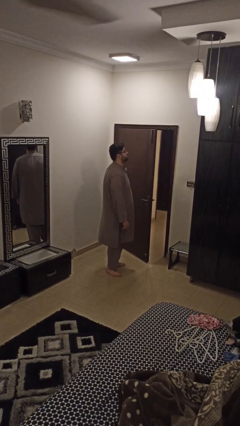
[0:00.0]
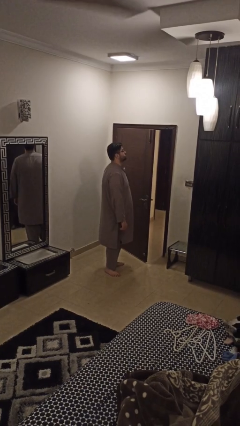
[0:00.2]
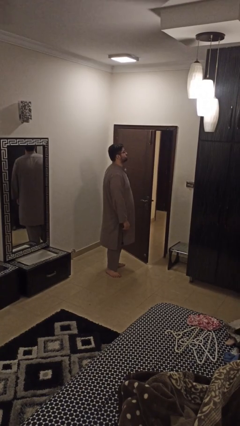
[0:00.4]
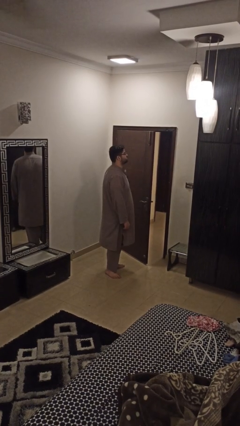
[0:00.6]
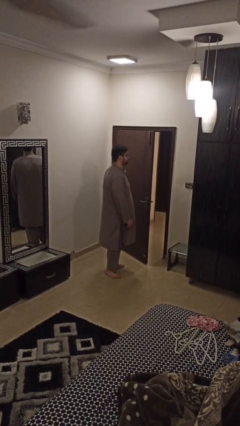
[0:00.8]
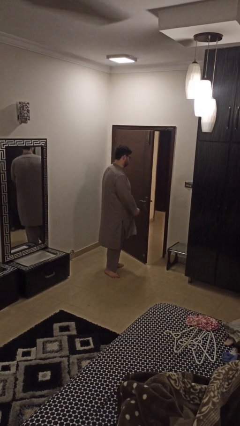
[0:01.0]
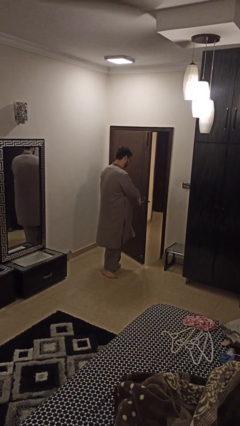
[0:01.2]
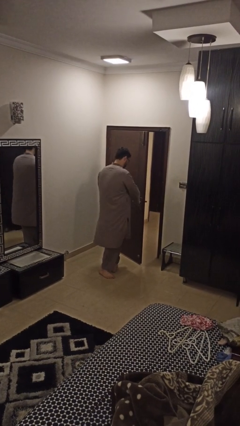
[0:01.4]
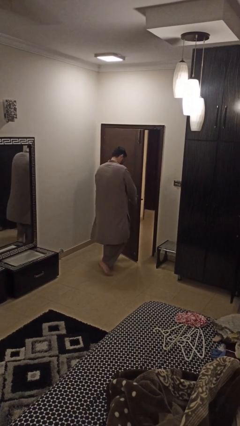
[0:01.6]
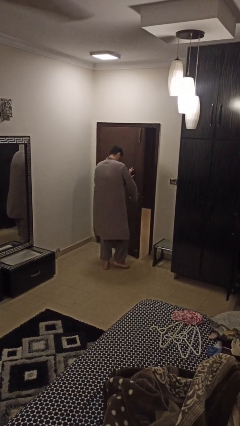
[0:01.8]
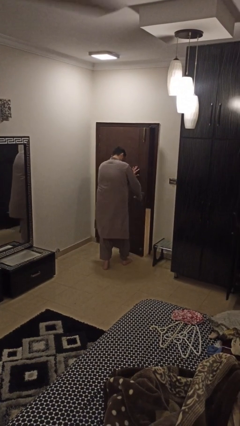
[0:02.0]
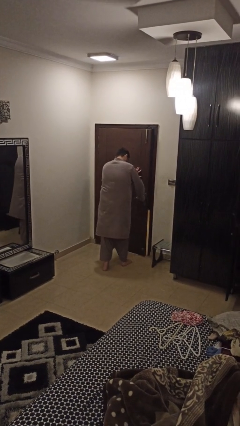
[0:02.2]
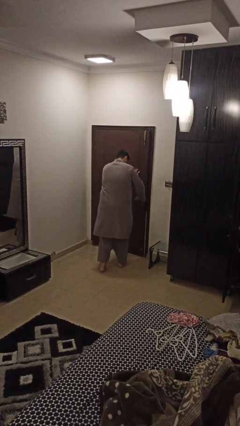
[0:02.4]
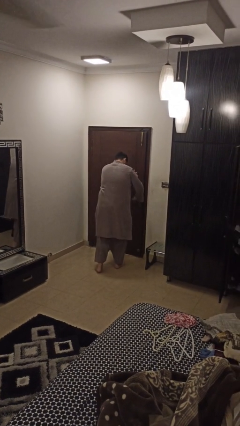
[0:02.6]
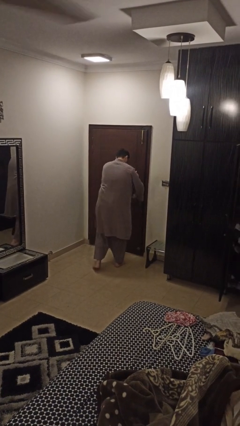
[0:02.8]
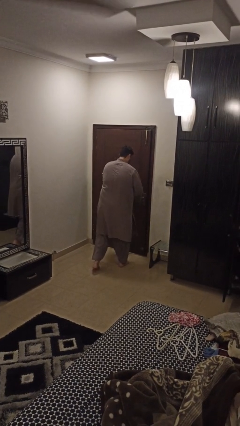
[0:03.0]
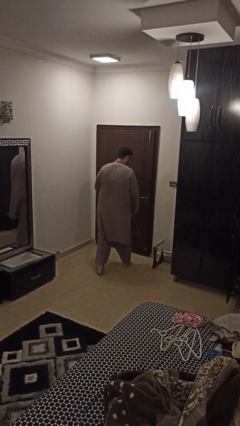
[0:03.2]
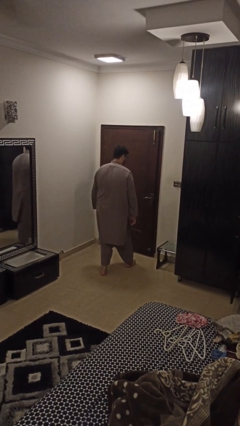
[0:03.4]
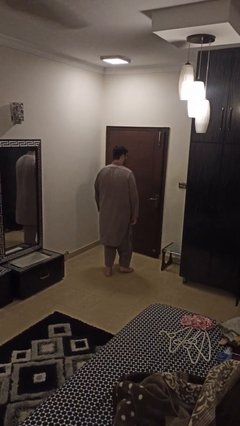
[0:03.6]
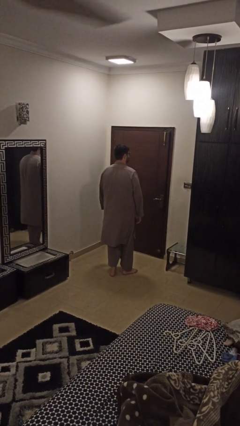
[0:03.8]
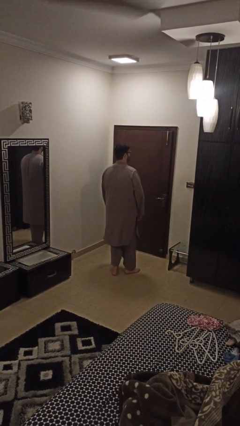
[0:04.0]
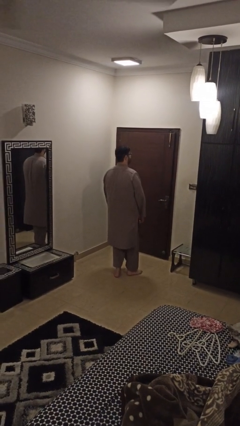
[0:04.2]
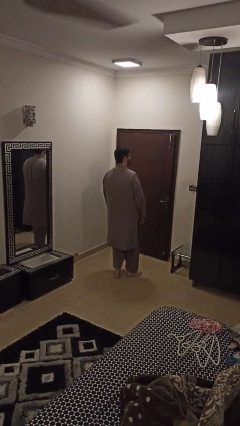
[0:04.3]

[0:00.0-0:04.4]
person closes facility door

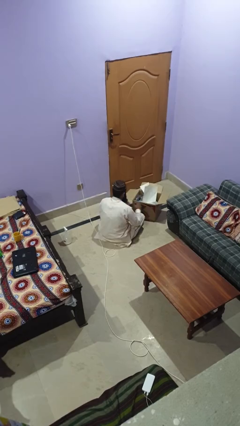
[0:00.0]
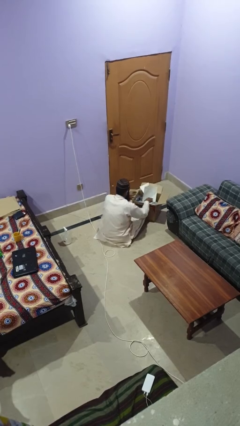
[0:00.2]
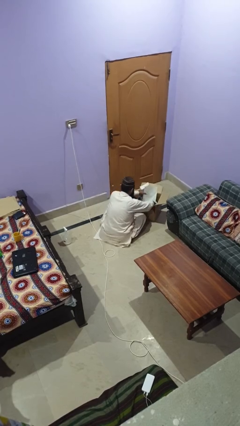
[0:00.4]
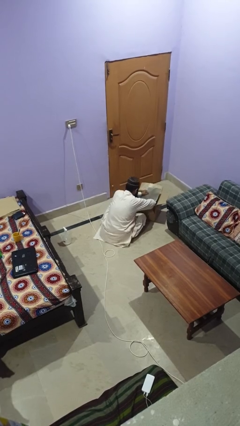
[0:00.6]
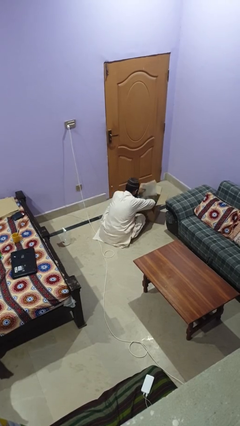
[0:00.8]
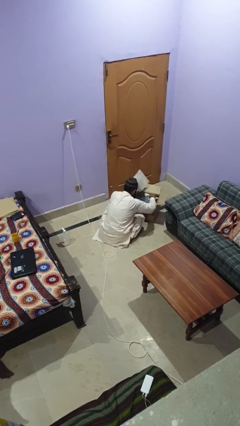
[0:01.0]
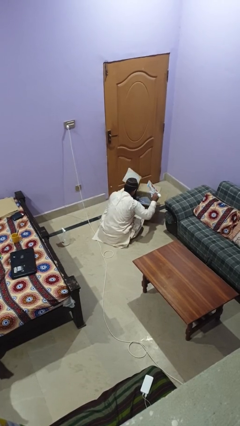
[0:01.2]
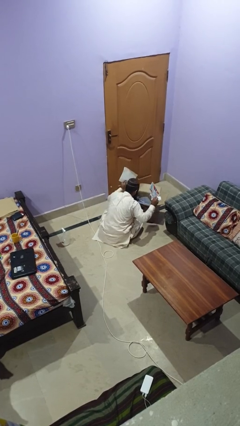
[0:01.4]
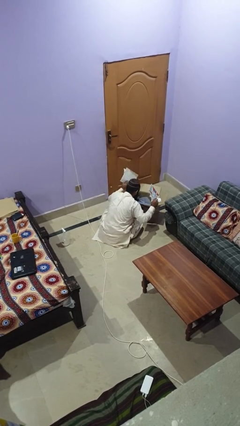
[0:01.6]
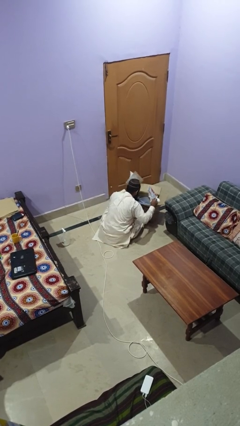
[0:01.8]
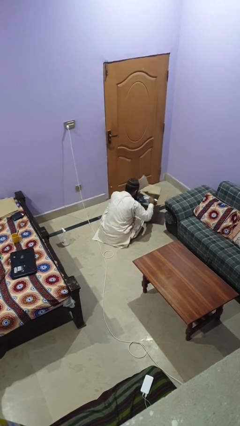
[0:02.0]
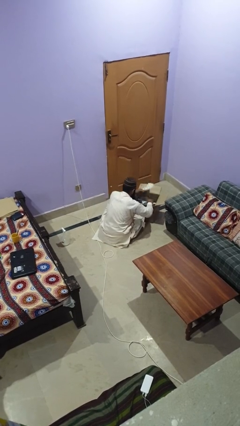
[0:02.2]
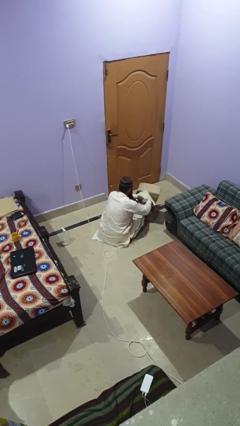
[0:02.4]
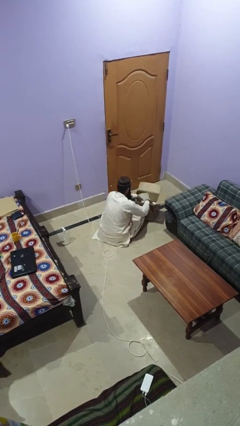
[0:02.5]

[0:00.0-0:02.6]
person searches in box

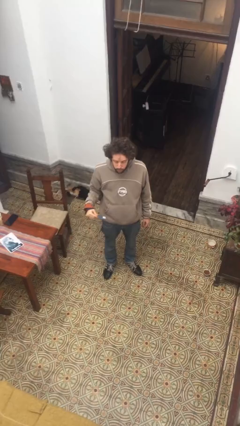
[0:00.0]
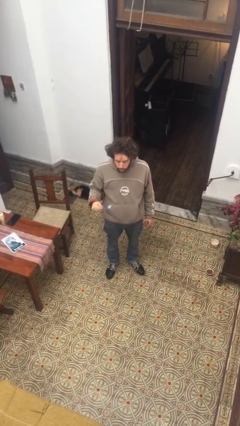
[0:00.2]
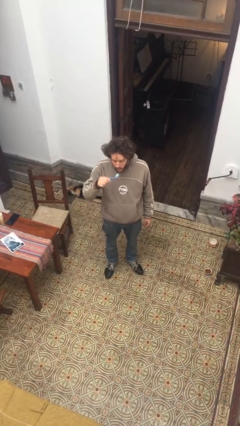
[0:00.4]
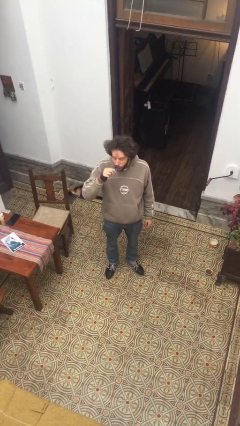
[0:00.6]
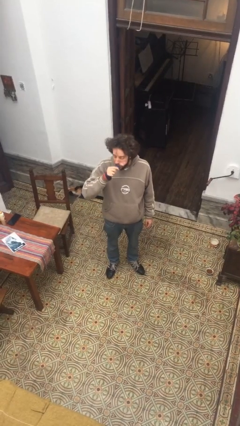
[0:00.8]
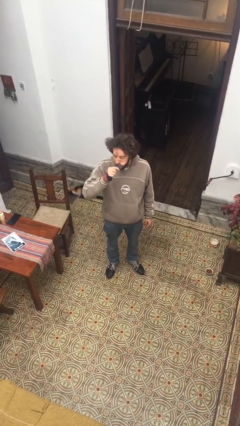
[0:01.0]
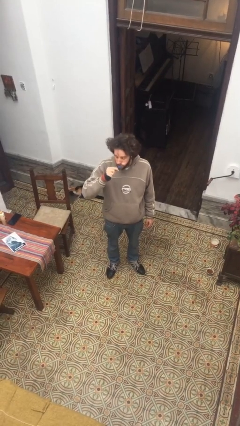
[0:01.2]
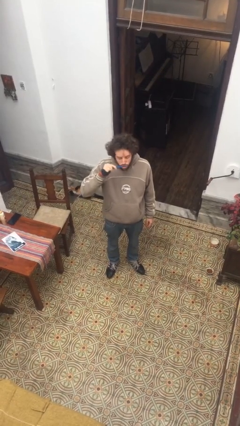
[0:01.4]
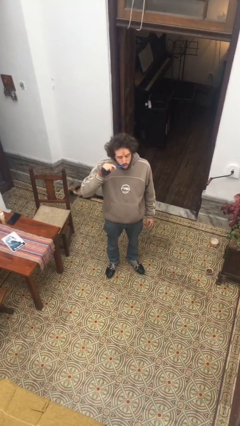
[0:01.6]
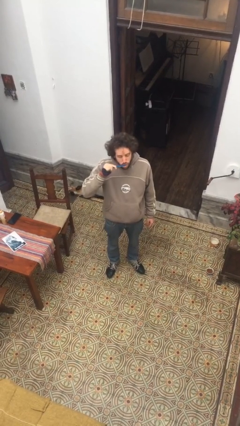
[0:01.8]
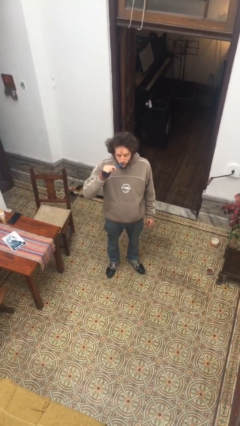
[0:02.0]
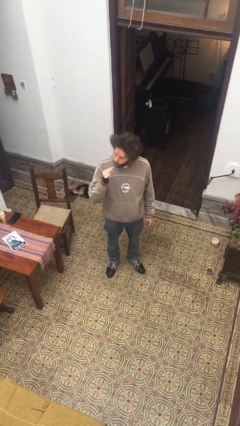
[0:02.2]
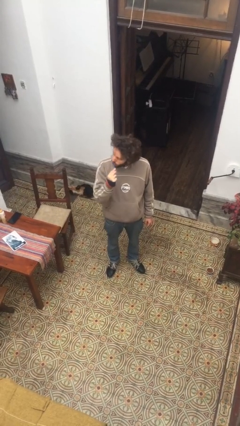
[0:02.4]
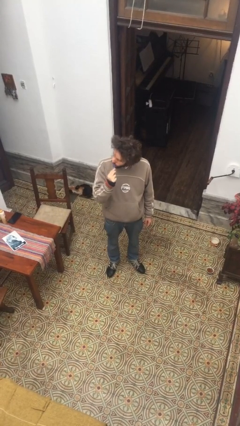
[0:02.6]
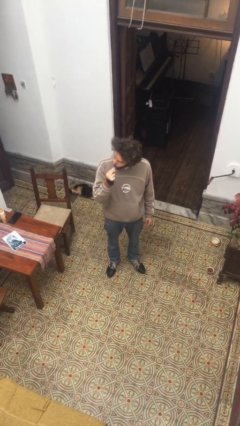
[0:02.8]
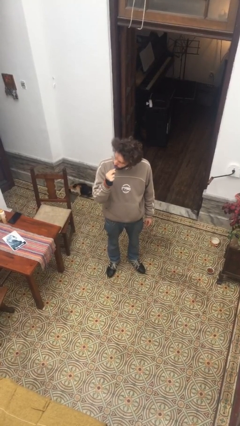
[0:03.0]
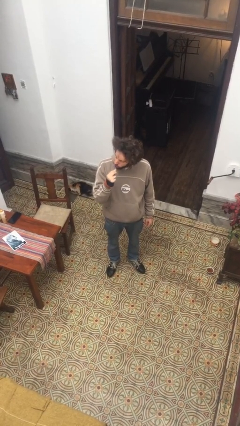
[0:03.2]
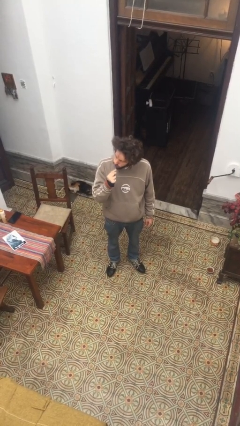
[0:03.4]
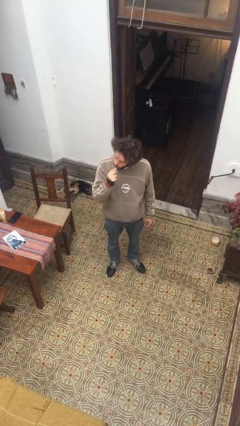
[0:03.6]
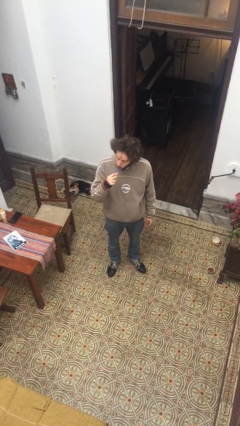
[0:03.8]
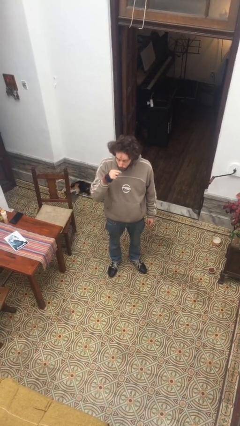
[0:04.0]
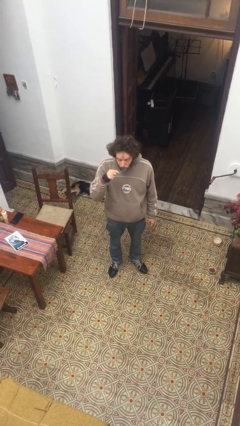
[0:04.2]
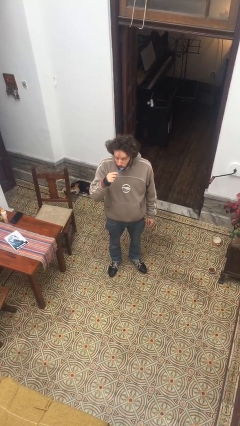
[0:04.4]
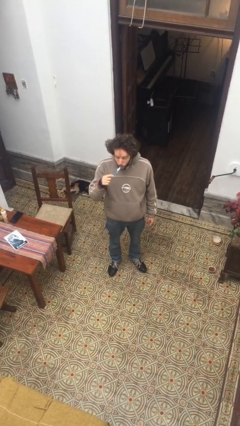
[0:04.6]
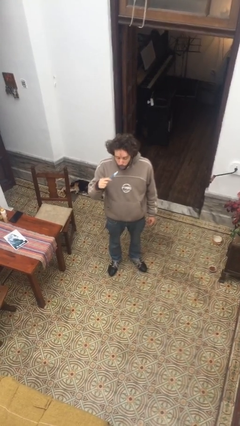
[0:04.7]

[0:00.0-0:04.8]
person brushes teeth

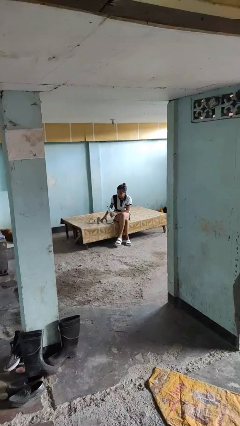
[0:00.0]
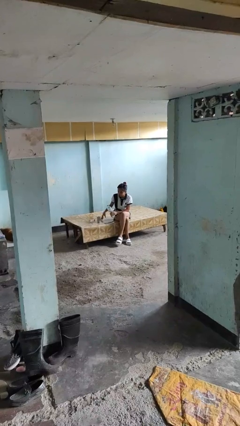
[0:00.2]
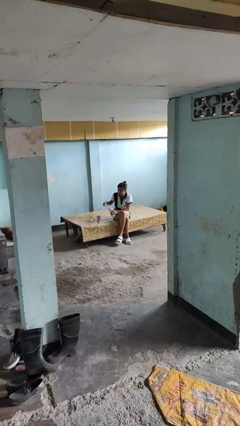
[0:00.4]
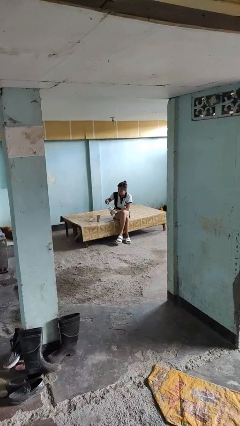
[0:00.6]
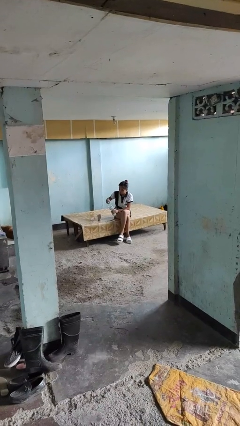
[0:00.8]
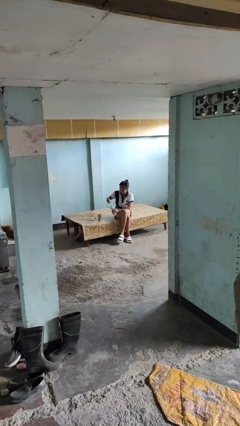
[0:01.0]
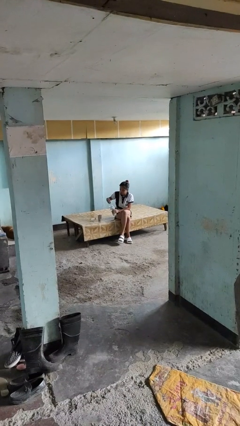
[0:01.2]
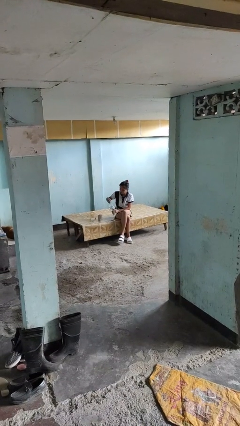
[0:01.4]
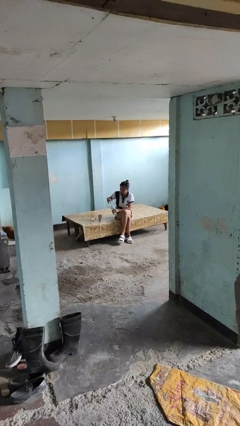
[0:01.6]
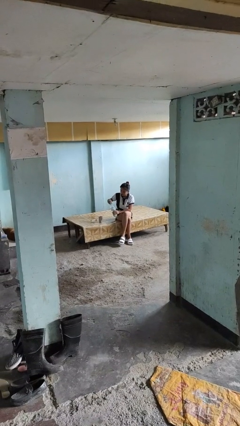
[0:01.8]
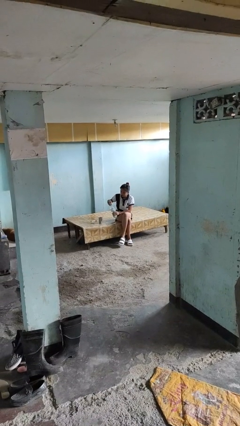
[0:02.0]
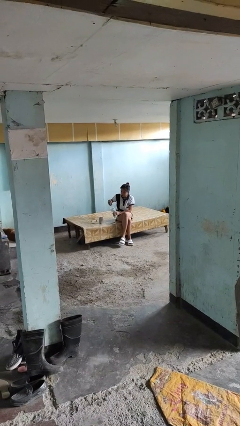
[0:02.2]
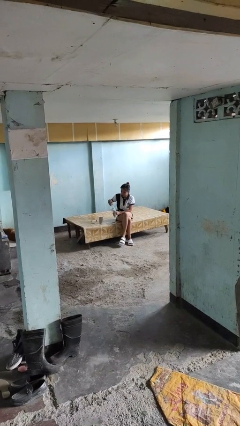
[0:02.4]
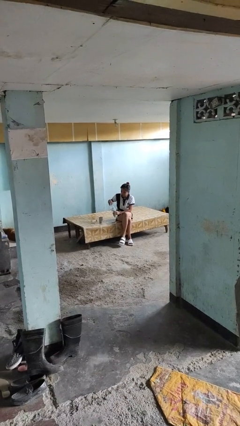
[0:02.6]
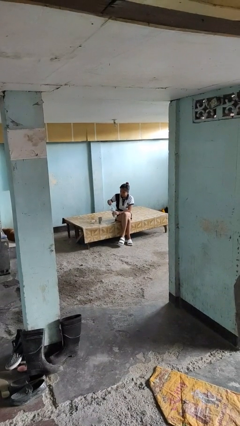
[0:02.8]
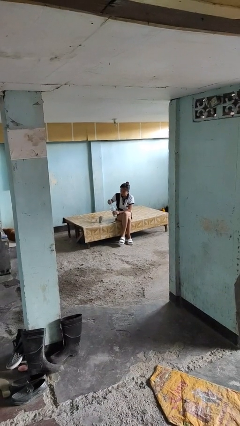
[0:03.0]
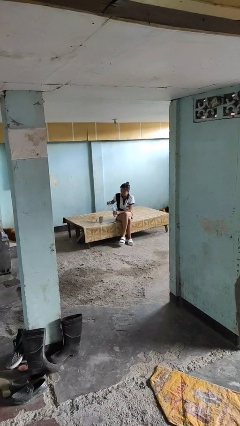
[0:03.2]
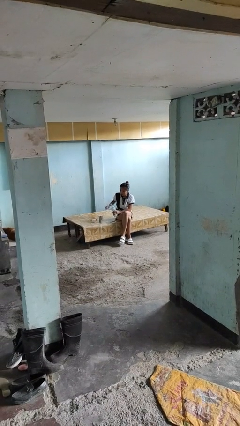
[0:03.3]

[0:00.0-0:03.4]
person unscrews lid from bottle

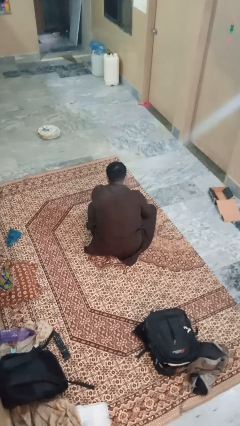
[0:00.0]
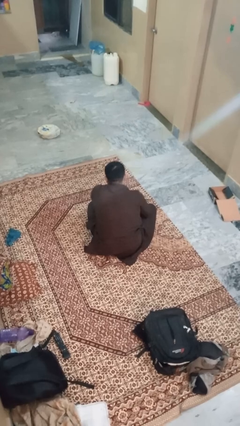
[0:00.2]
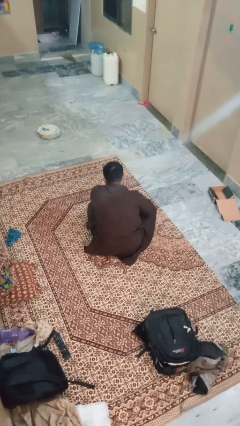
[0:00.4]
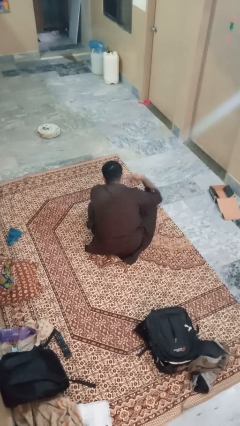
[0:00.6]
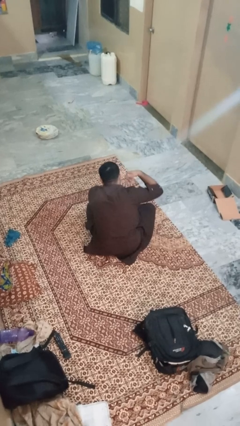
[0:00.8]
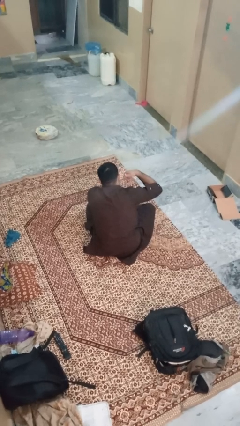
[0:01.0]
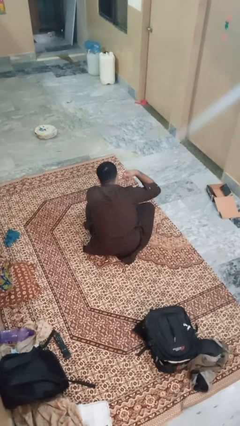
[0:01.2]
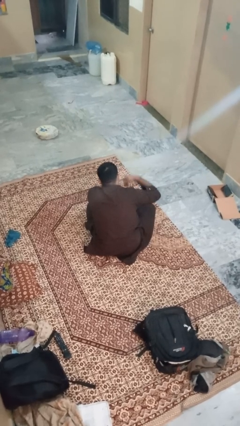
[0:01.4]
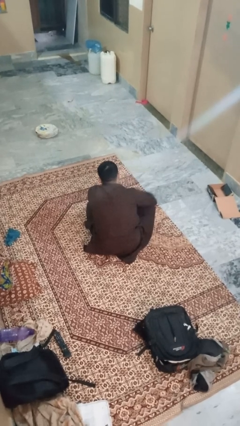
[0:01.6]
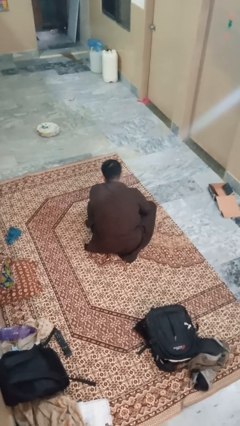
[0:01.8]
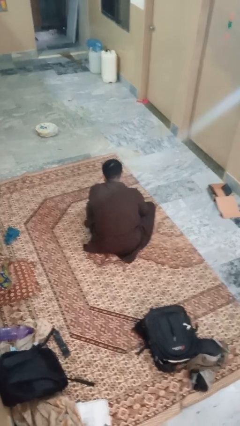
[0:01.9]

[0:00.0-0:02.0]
person gestures call me

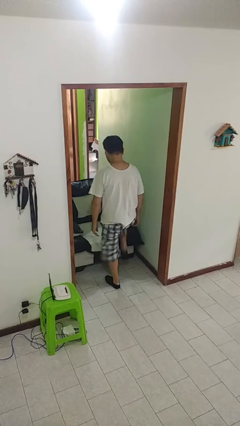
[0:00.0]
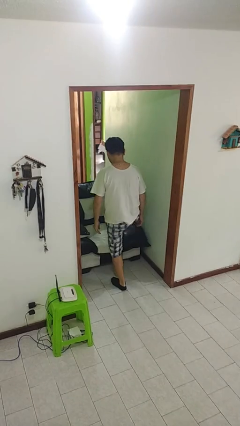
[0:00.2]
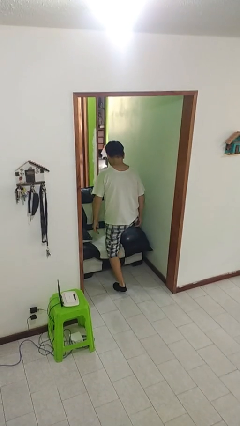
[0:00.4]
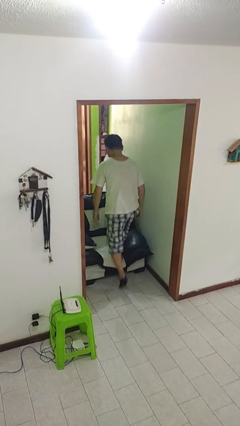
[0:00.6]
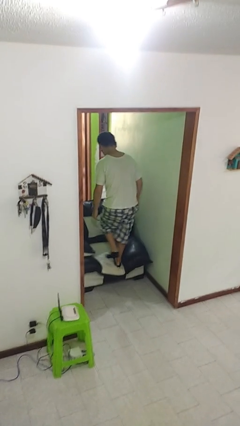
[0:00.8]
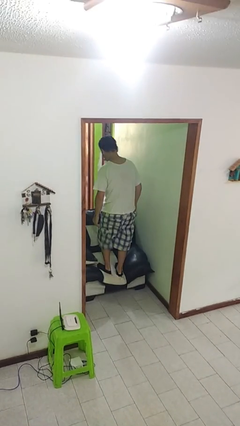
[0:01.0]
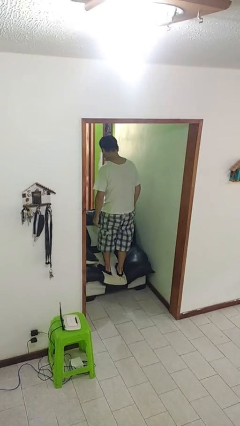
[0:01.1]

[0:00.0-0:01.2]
person climbs on couch
